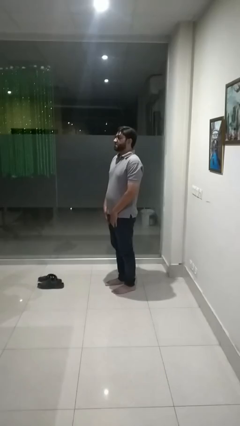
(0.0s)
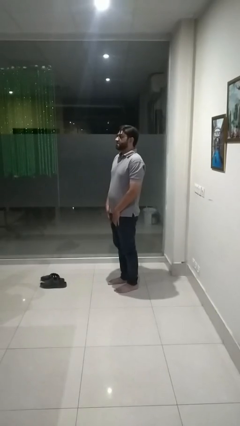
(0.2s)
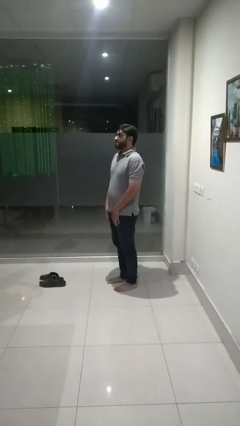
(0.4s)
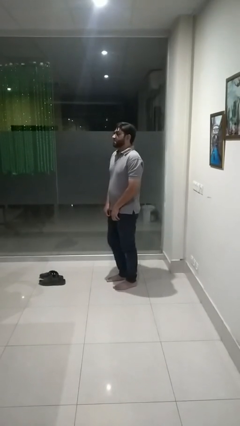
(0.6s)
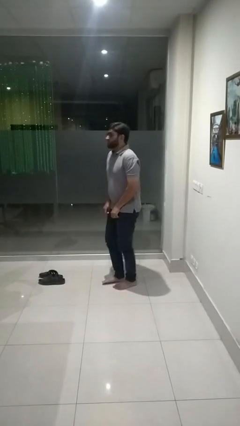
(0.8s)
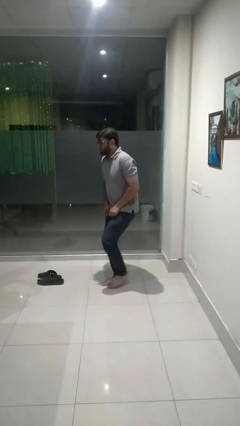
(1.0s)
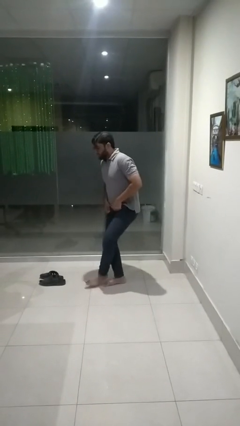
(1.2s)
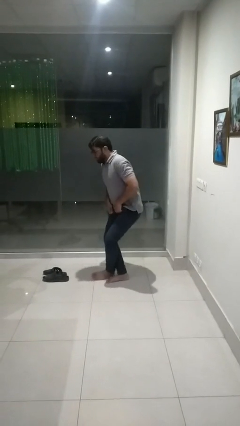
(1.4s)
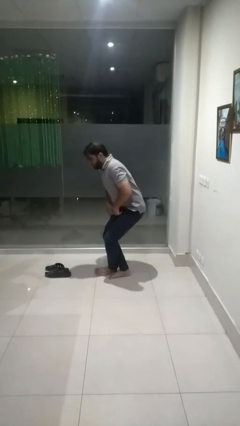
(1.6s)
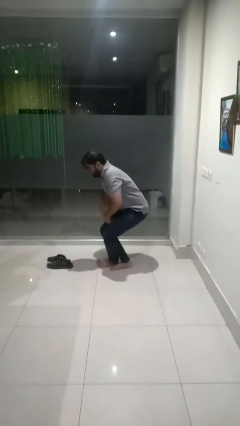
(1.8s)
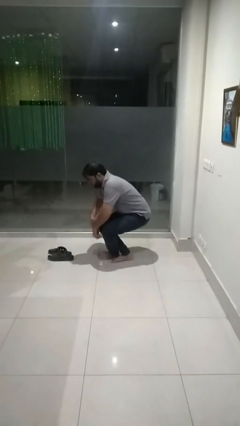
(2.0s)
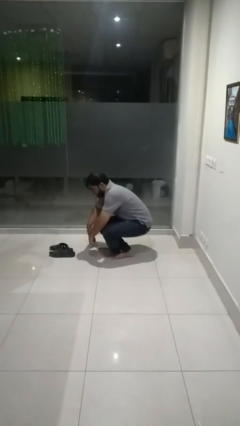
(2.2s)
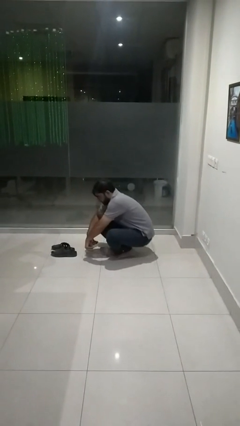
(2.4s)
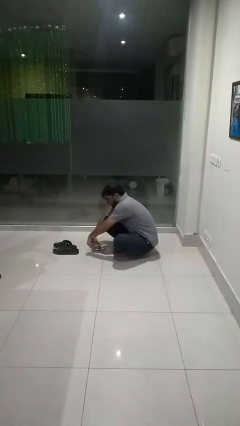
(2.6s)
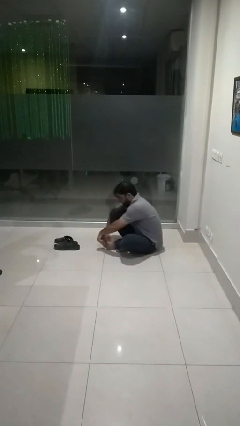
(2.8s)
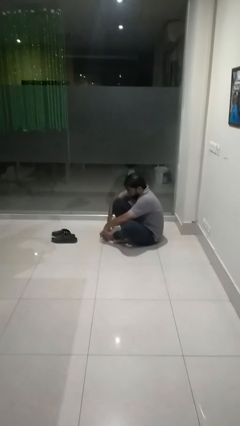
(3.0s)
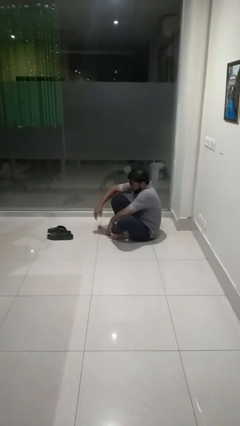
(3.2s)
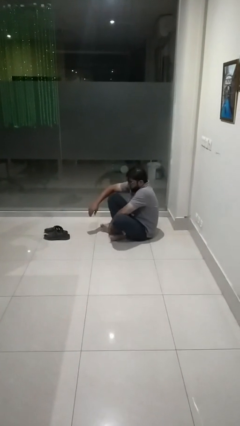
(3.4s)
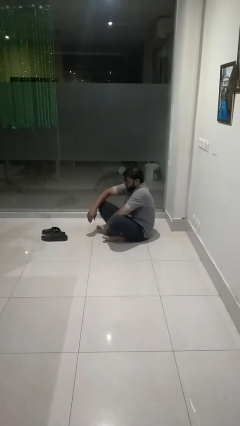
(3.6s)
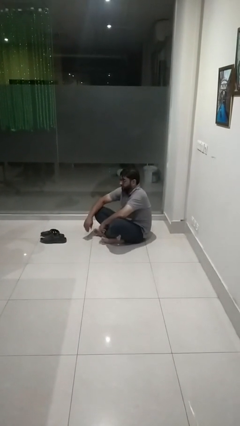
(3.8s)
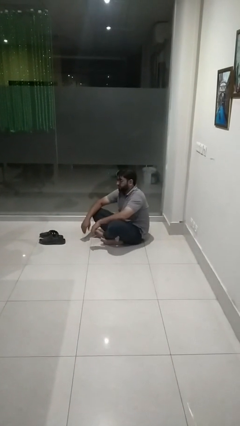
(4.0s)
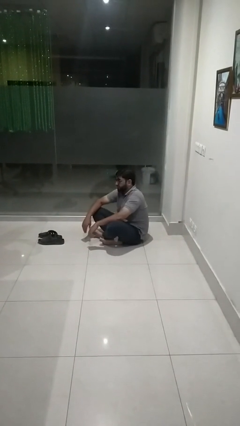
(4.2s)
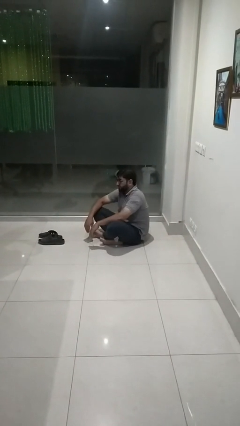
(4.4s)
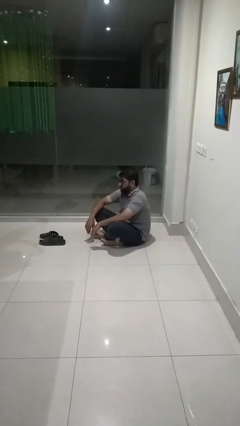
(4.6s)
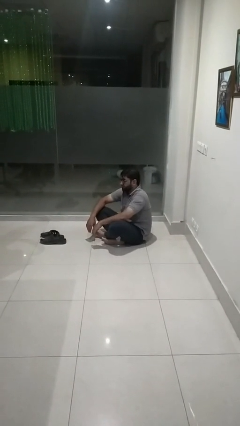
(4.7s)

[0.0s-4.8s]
person sits crisscross

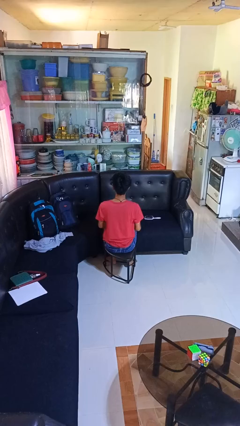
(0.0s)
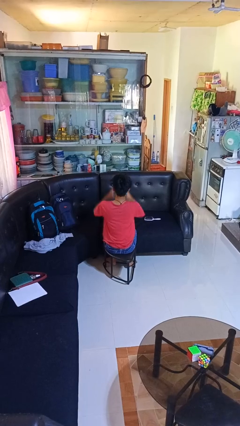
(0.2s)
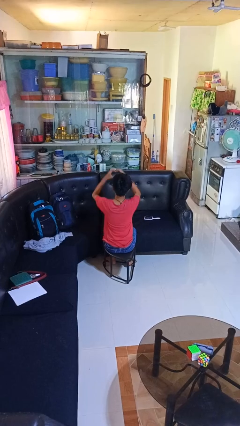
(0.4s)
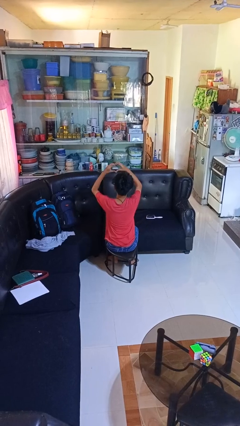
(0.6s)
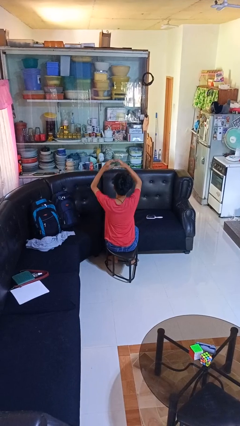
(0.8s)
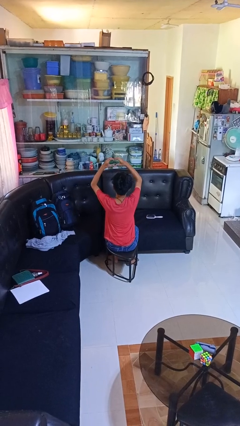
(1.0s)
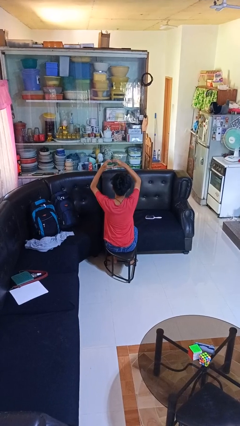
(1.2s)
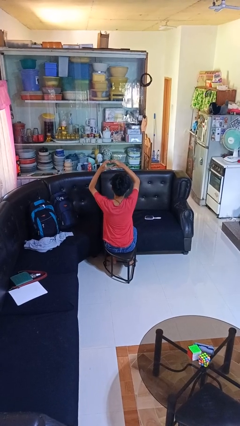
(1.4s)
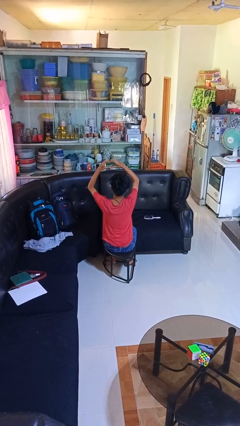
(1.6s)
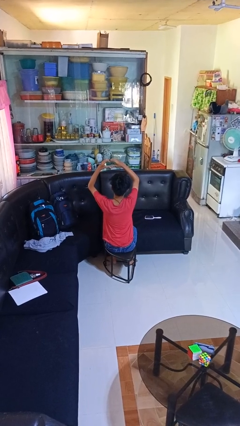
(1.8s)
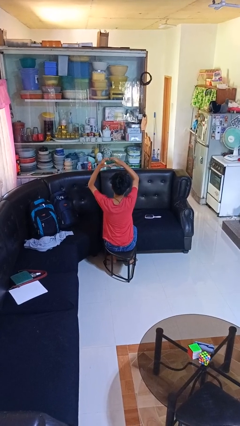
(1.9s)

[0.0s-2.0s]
person gestures heart

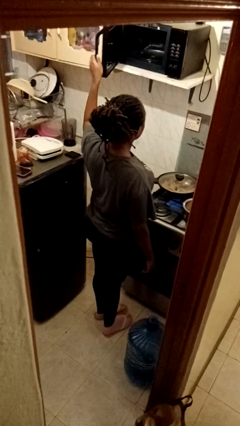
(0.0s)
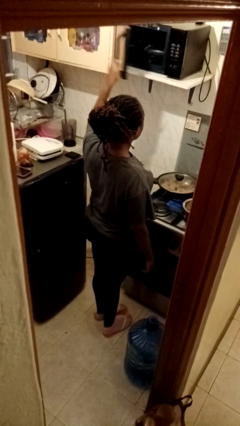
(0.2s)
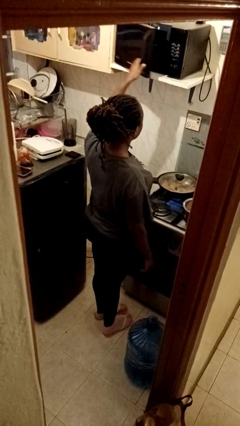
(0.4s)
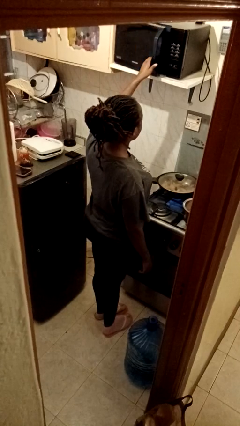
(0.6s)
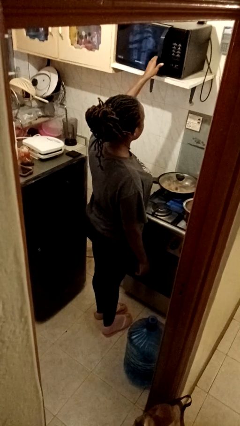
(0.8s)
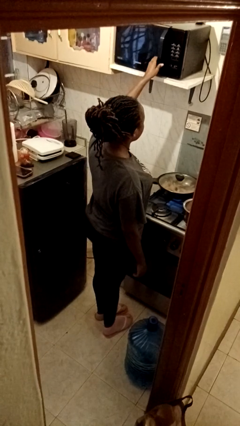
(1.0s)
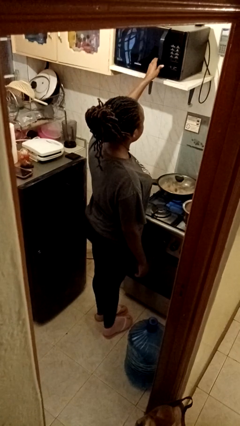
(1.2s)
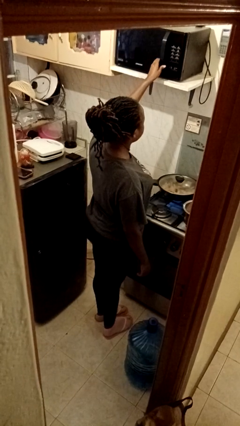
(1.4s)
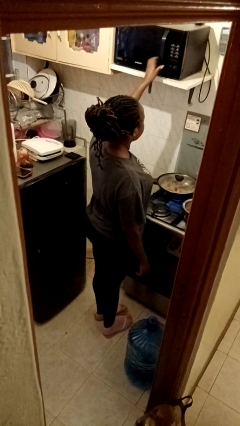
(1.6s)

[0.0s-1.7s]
person closes microwave

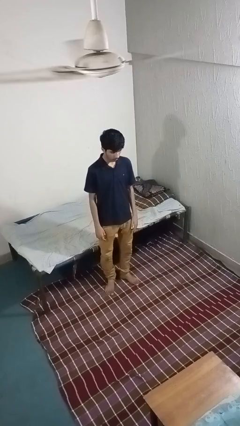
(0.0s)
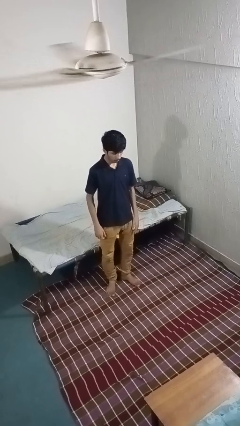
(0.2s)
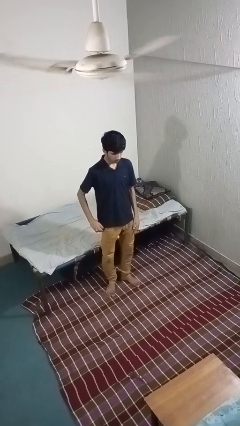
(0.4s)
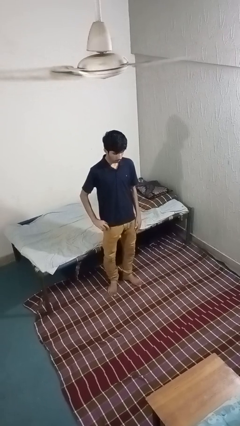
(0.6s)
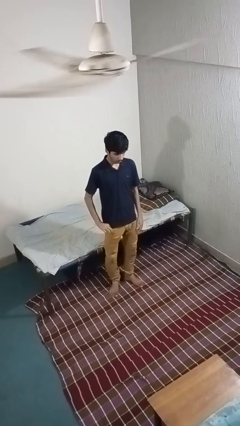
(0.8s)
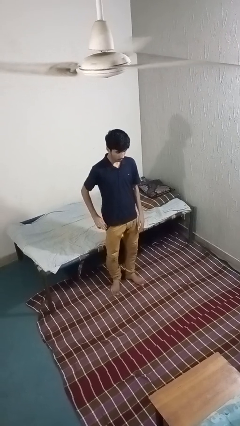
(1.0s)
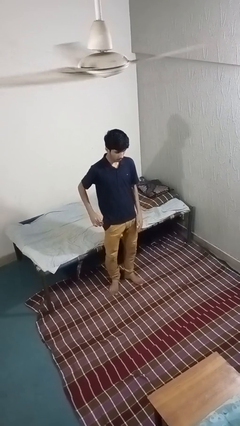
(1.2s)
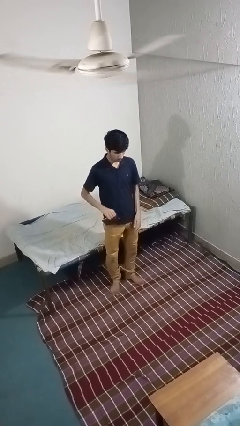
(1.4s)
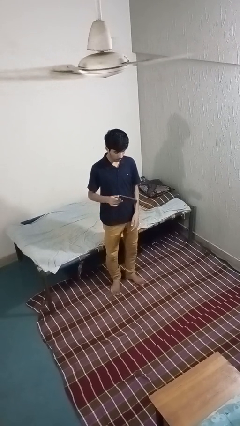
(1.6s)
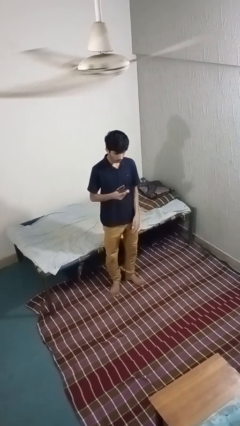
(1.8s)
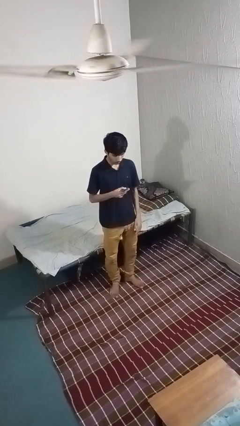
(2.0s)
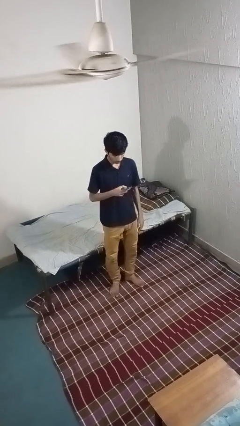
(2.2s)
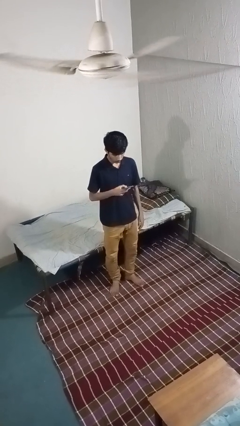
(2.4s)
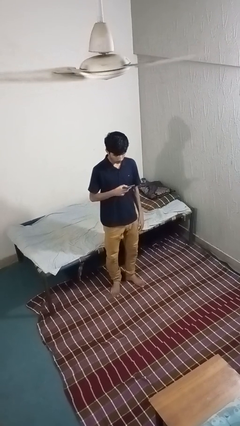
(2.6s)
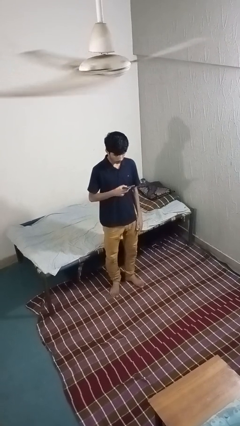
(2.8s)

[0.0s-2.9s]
person takes phone from pocket

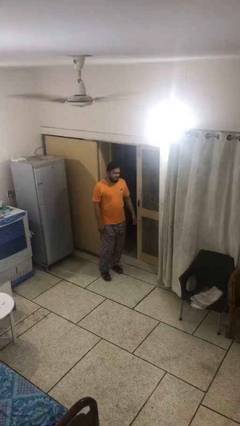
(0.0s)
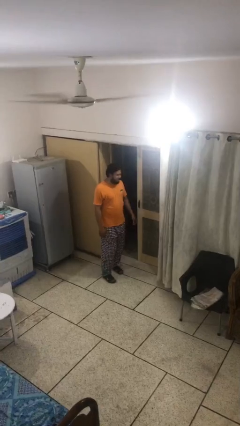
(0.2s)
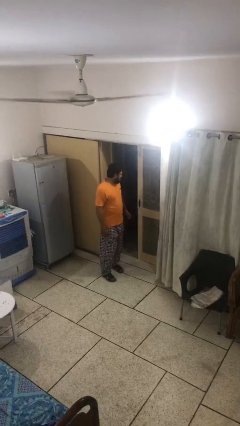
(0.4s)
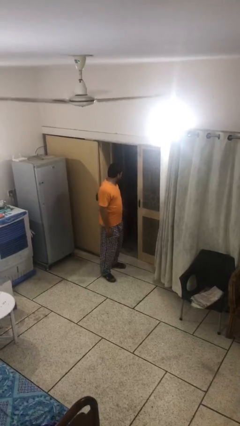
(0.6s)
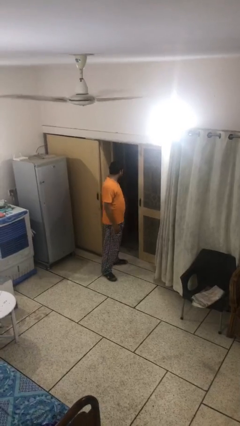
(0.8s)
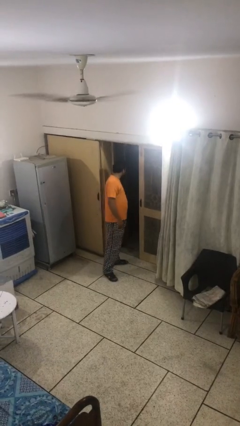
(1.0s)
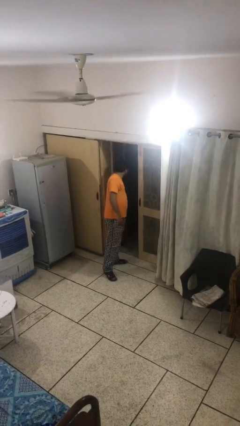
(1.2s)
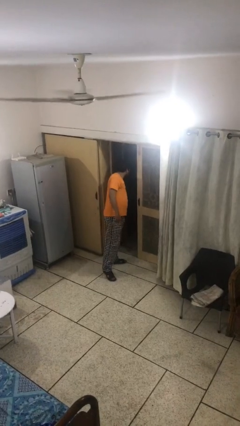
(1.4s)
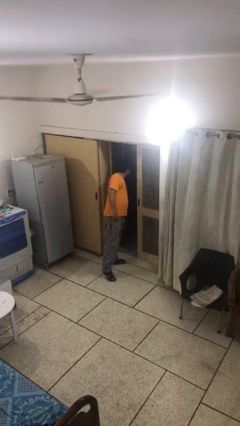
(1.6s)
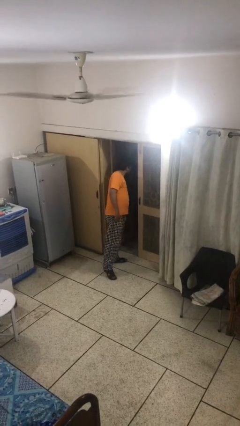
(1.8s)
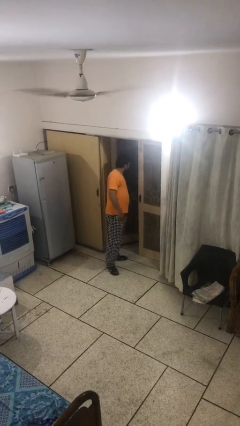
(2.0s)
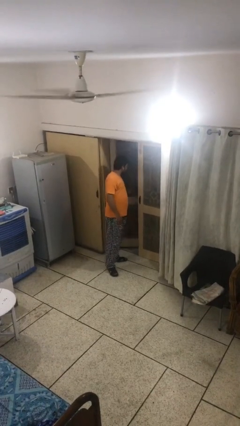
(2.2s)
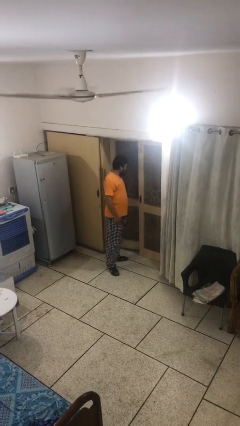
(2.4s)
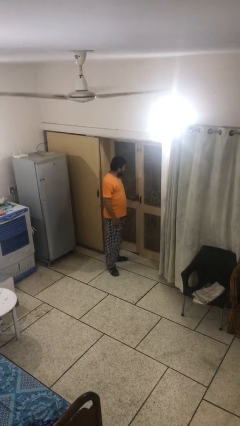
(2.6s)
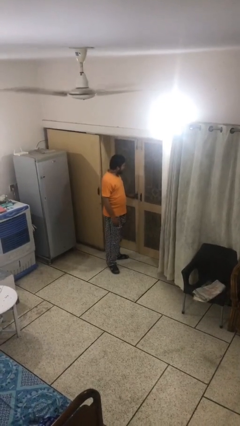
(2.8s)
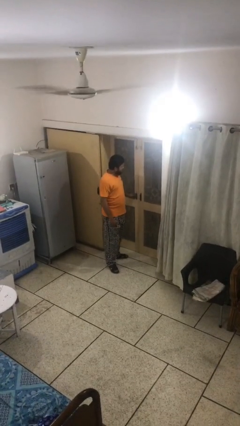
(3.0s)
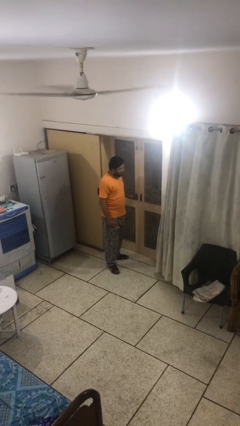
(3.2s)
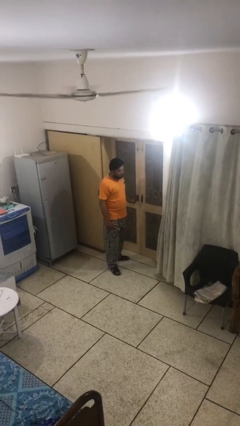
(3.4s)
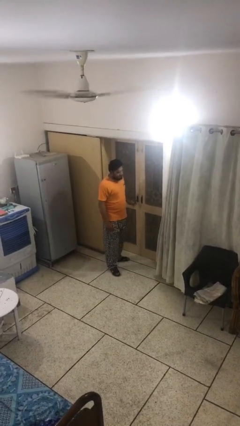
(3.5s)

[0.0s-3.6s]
person closes facility door

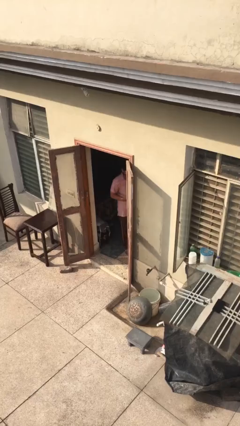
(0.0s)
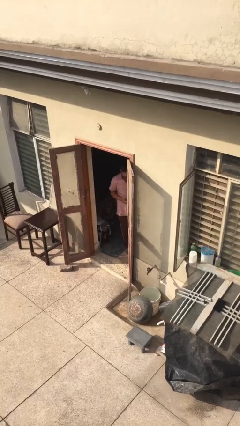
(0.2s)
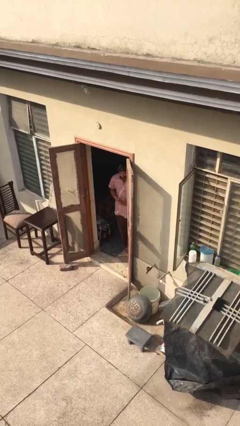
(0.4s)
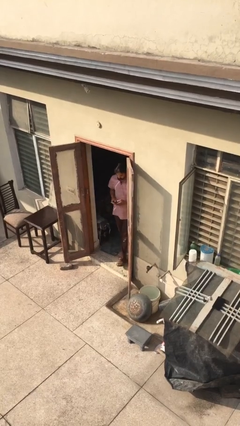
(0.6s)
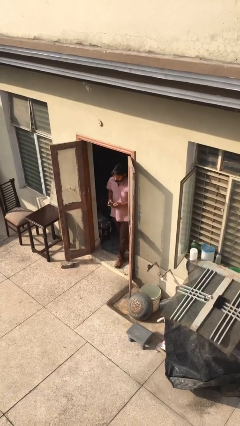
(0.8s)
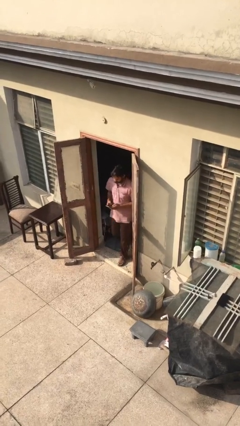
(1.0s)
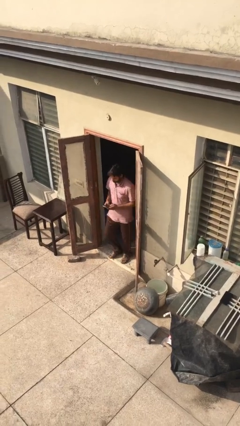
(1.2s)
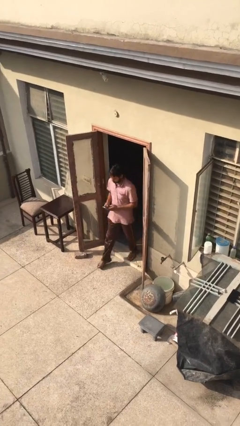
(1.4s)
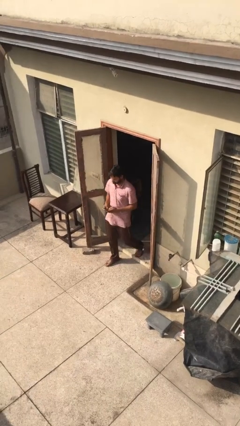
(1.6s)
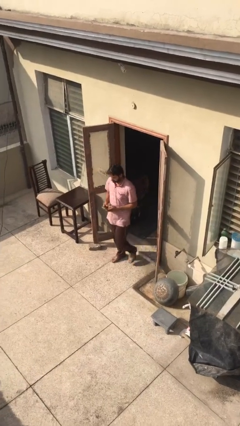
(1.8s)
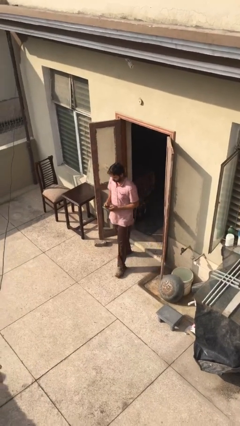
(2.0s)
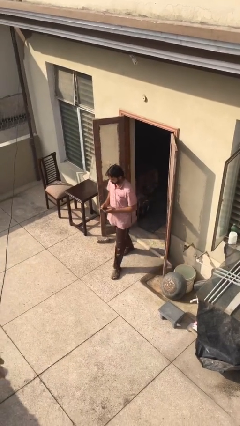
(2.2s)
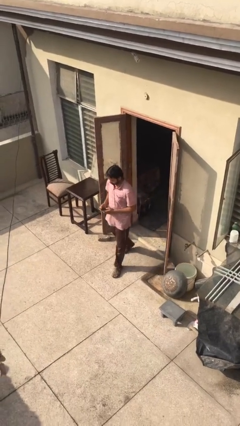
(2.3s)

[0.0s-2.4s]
person enters scene through structure

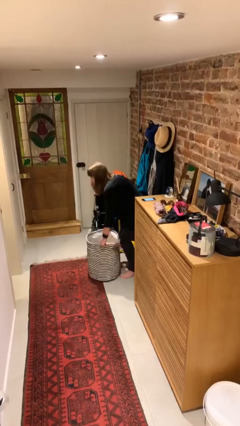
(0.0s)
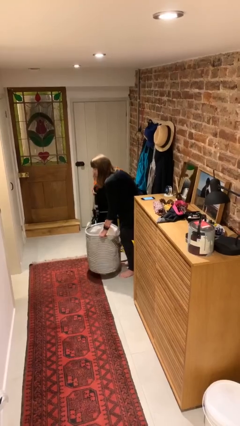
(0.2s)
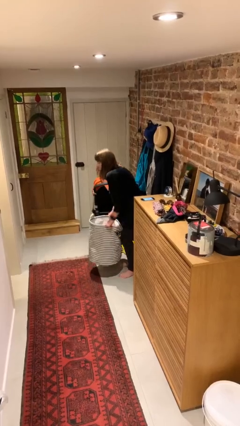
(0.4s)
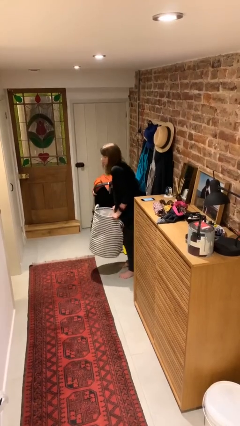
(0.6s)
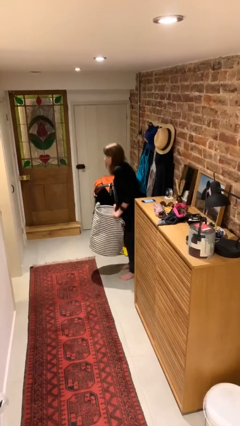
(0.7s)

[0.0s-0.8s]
person picks up object from floor
